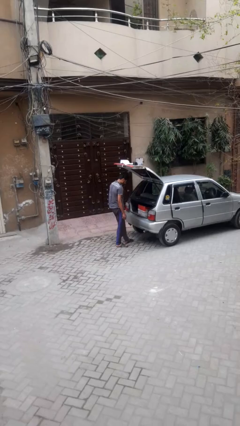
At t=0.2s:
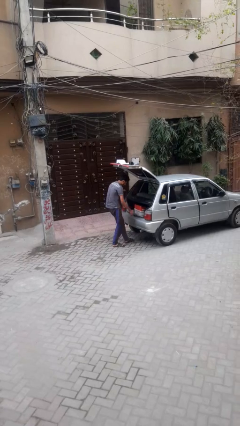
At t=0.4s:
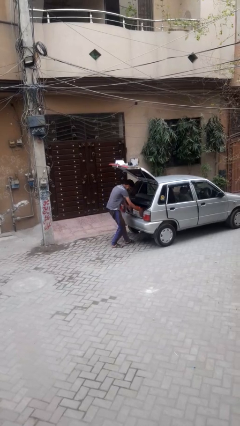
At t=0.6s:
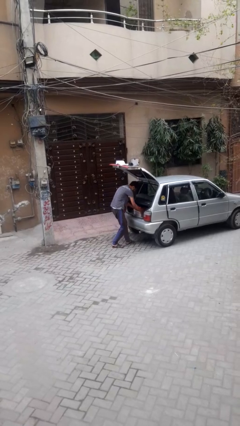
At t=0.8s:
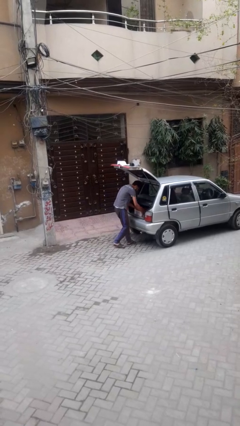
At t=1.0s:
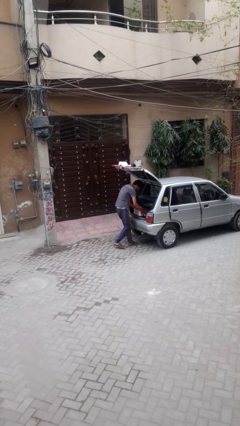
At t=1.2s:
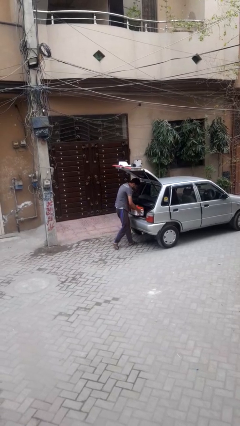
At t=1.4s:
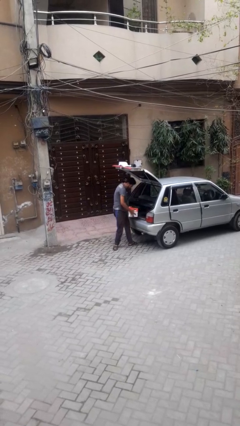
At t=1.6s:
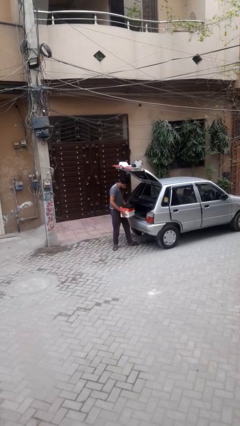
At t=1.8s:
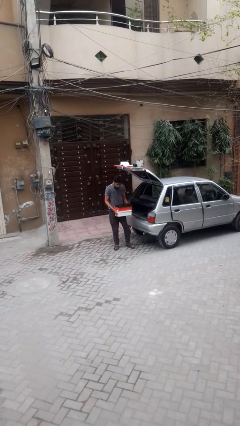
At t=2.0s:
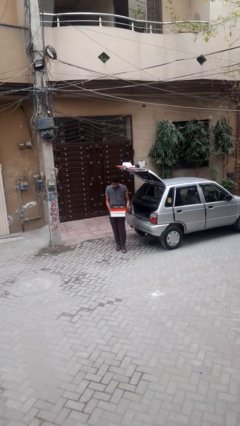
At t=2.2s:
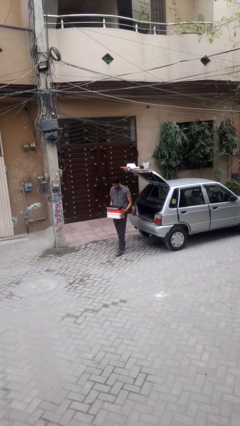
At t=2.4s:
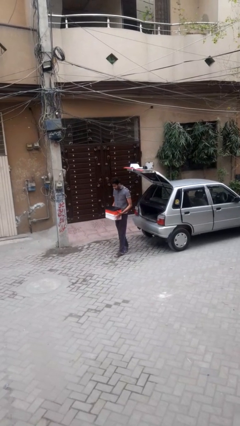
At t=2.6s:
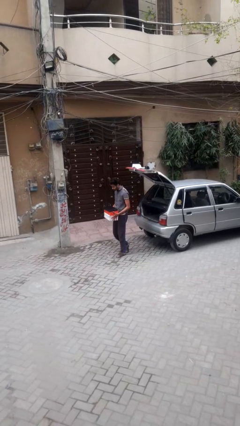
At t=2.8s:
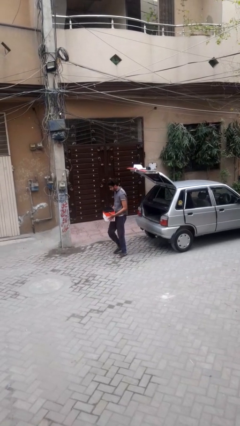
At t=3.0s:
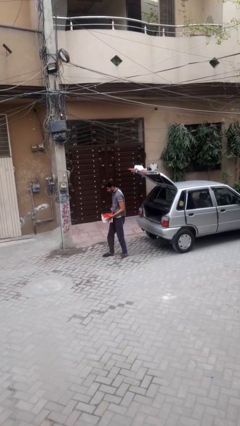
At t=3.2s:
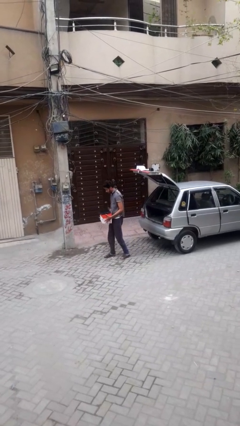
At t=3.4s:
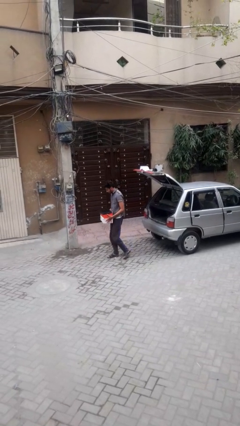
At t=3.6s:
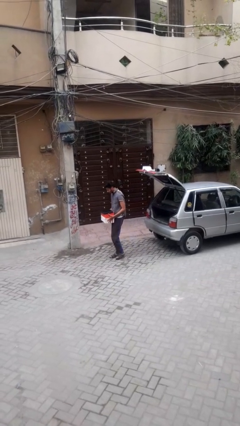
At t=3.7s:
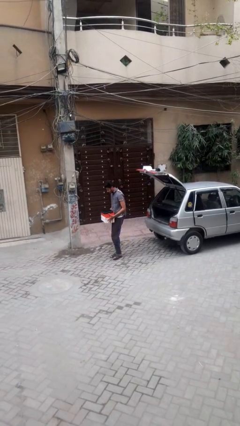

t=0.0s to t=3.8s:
person unloads car

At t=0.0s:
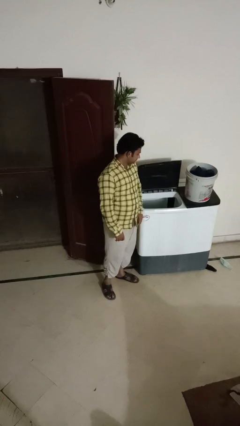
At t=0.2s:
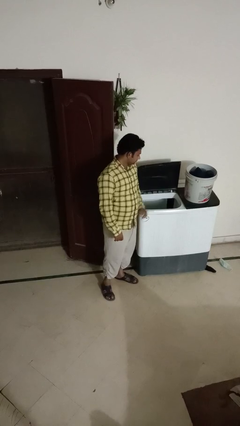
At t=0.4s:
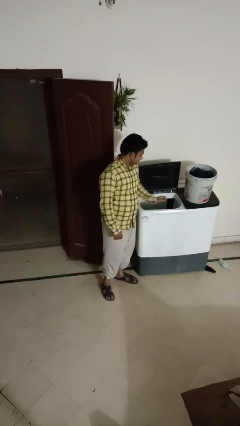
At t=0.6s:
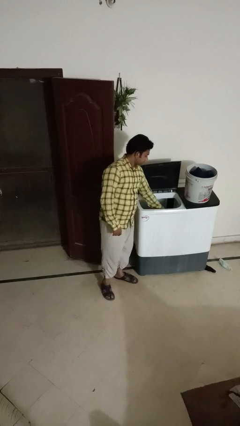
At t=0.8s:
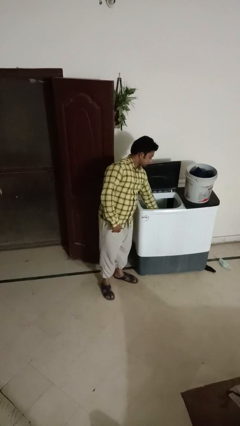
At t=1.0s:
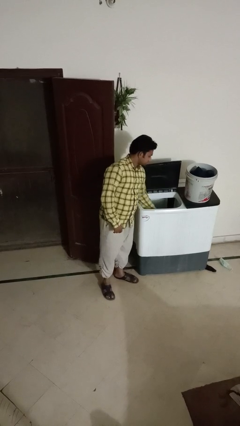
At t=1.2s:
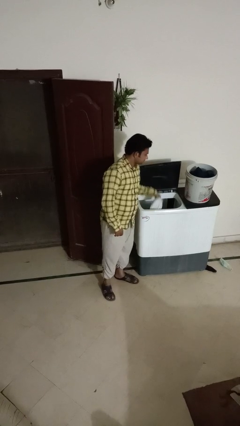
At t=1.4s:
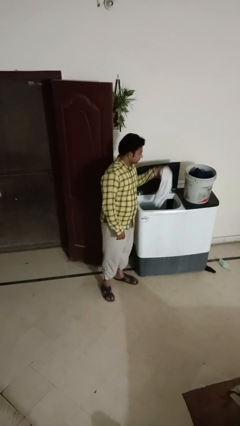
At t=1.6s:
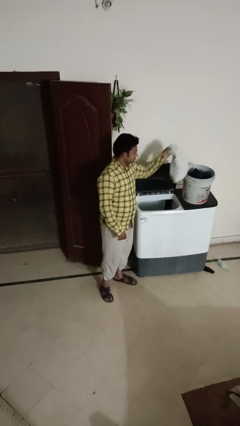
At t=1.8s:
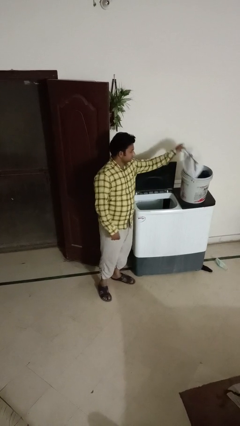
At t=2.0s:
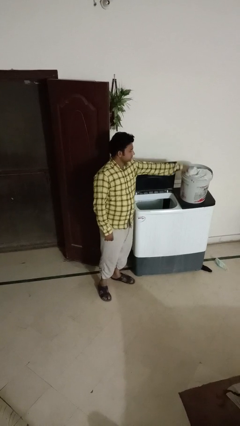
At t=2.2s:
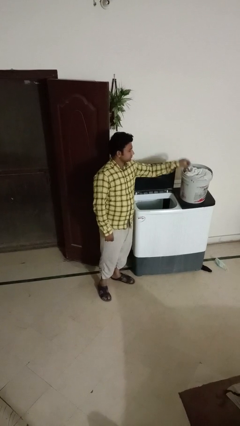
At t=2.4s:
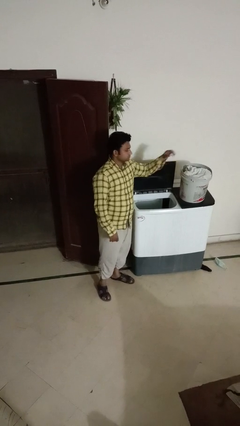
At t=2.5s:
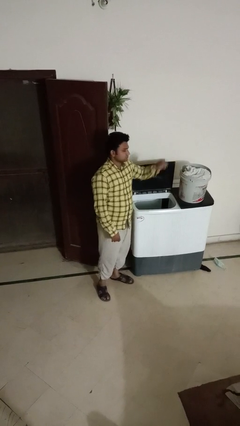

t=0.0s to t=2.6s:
person unloads clotheswasher

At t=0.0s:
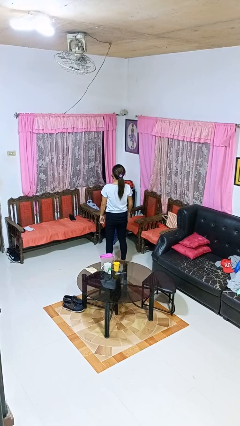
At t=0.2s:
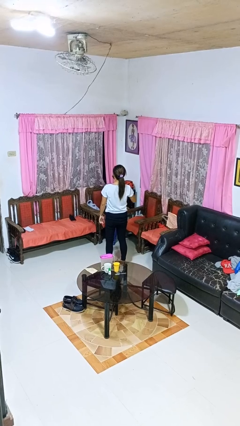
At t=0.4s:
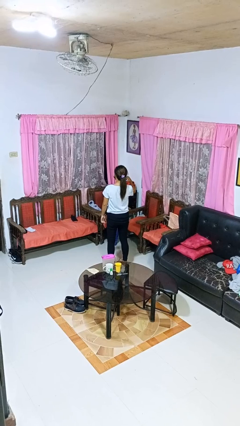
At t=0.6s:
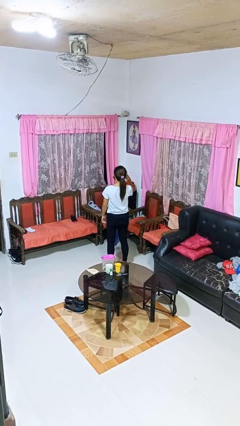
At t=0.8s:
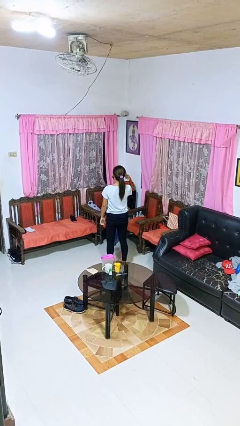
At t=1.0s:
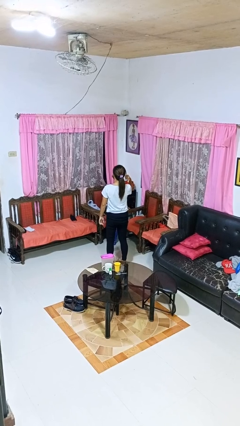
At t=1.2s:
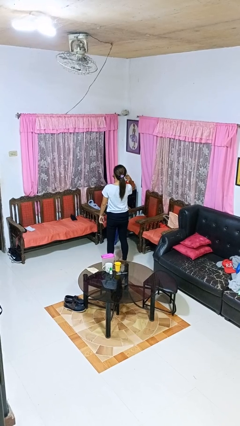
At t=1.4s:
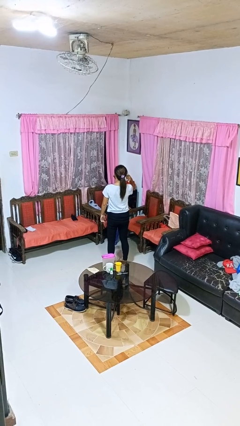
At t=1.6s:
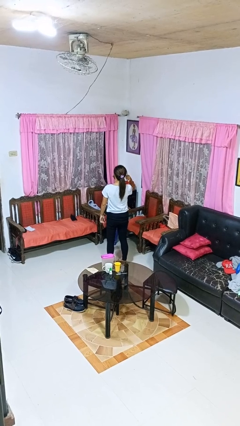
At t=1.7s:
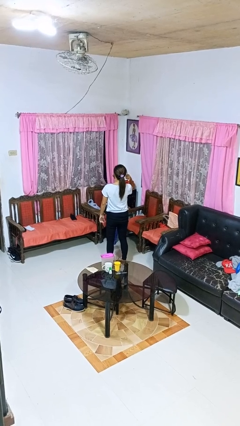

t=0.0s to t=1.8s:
person gestures behind me

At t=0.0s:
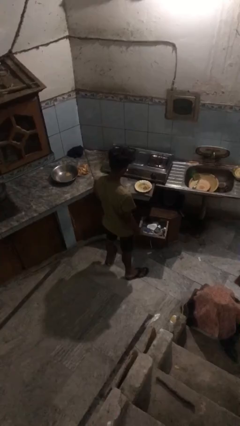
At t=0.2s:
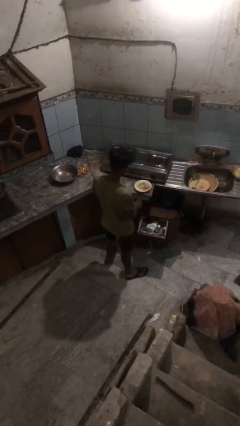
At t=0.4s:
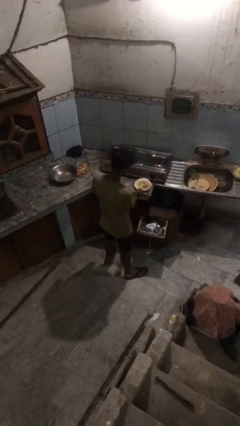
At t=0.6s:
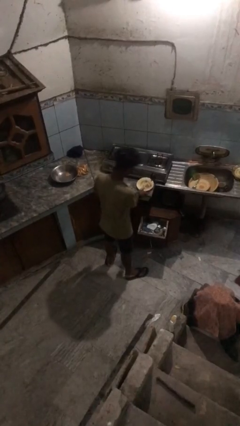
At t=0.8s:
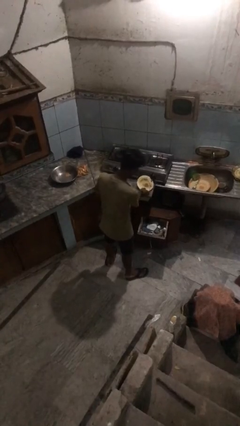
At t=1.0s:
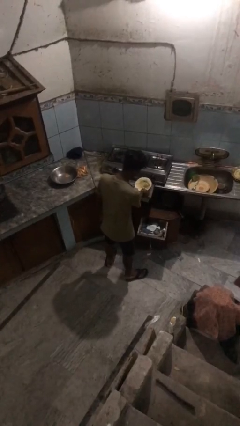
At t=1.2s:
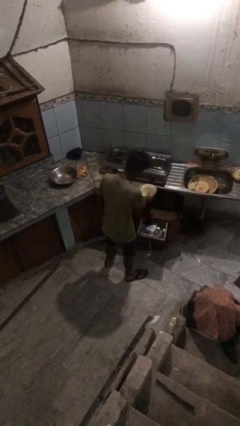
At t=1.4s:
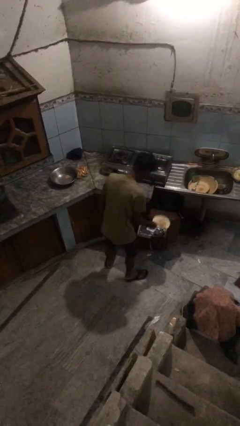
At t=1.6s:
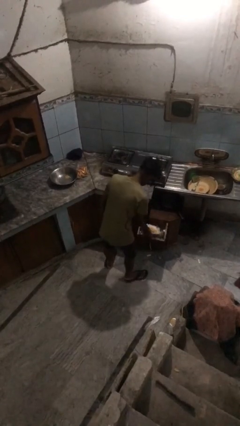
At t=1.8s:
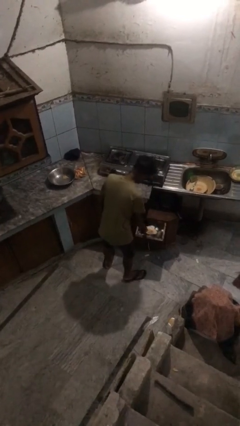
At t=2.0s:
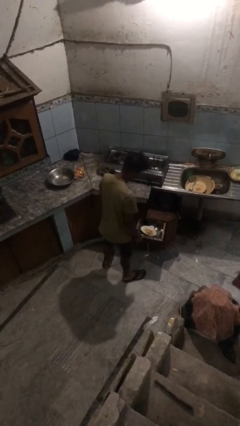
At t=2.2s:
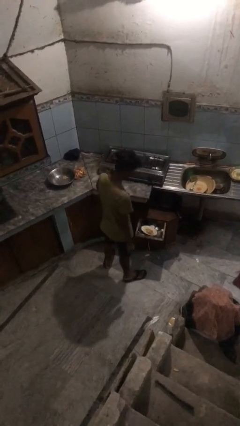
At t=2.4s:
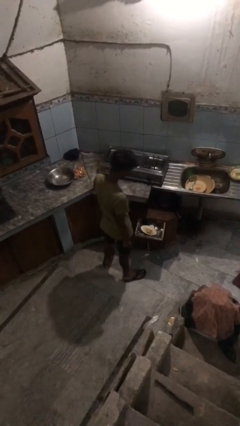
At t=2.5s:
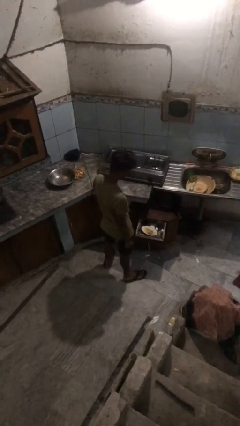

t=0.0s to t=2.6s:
person puts object into kitchen drawer

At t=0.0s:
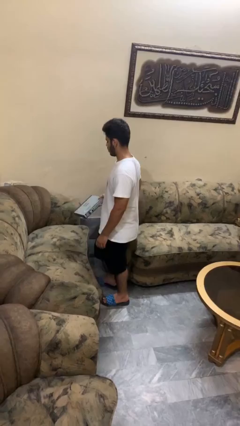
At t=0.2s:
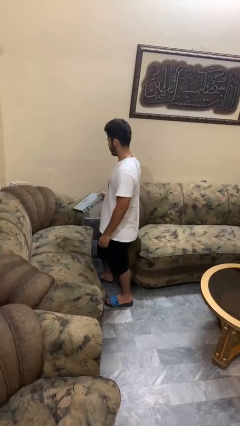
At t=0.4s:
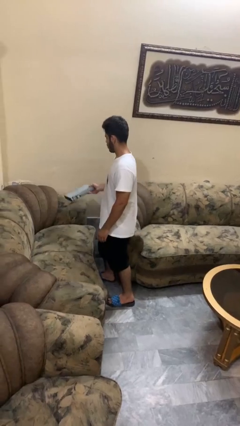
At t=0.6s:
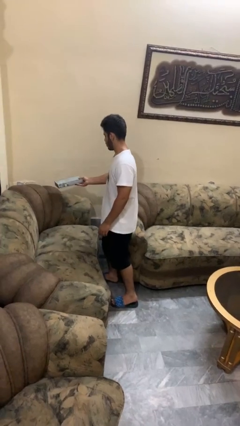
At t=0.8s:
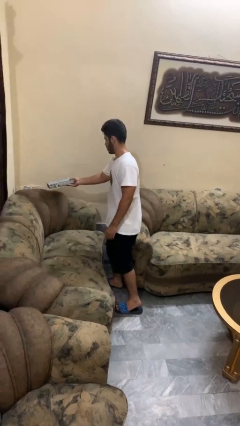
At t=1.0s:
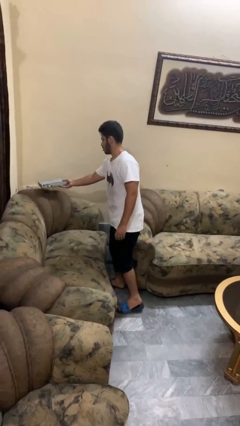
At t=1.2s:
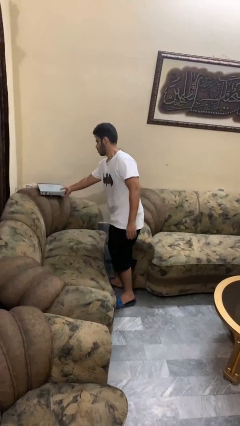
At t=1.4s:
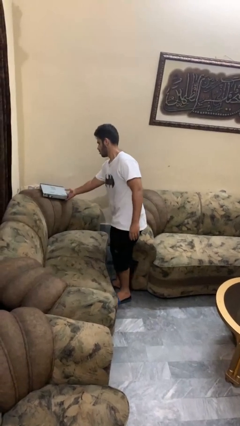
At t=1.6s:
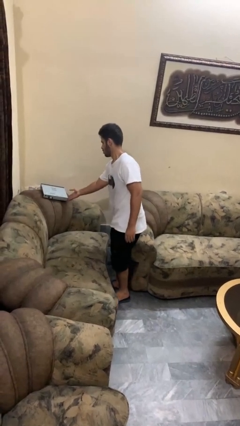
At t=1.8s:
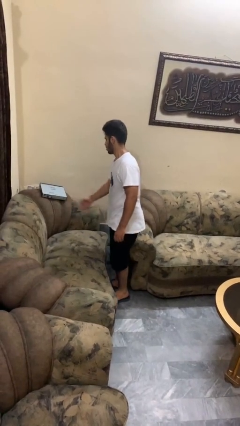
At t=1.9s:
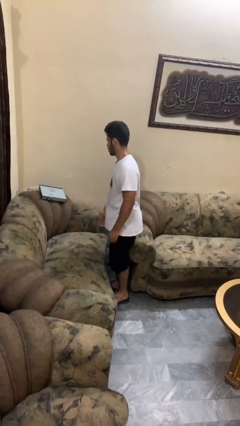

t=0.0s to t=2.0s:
person puts down object on couch

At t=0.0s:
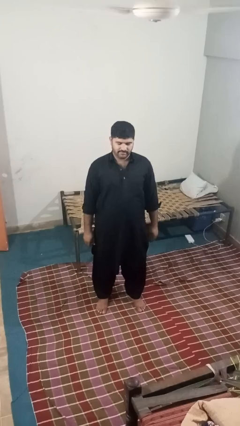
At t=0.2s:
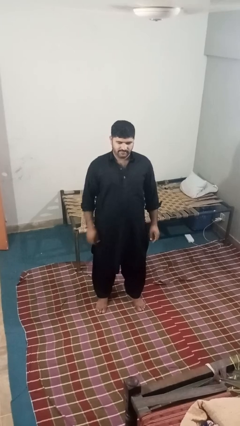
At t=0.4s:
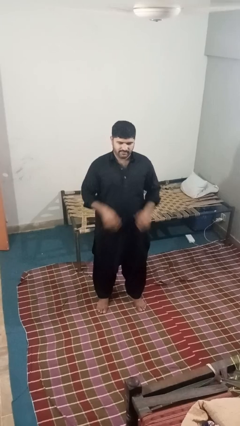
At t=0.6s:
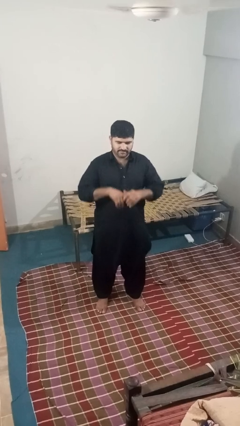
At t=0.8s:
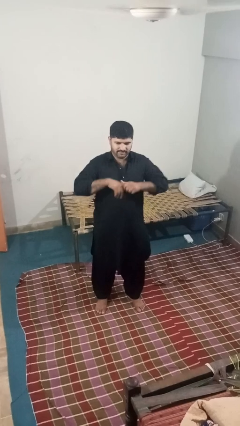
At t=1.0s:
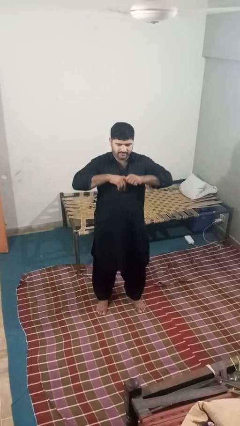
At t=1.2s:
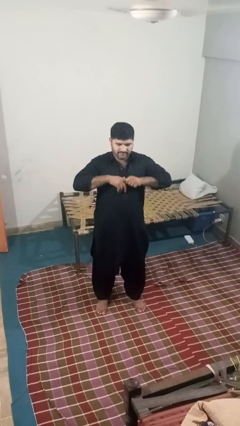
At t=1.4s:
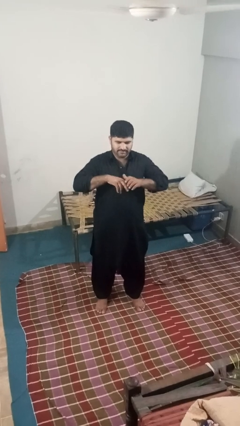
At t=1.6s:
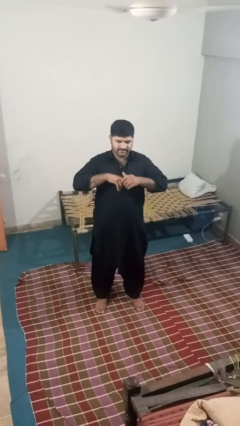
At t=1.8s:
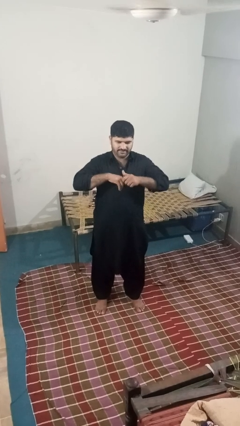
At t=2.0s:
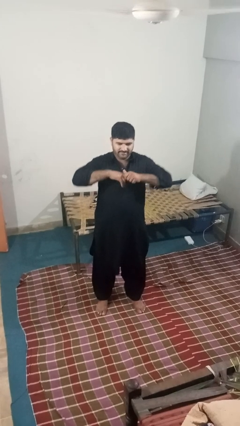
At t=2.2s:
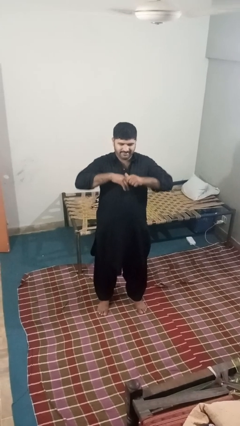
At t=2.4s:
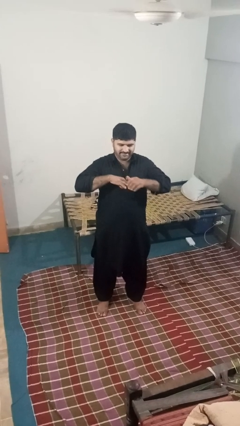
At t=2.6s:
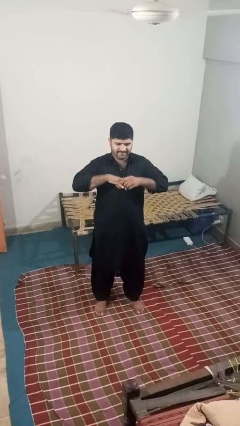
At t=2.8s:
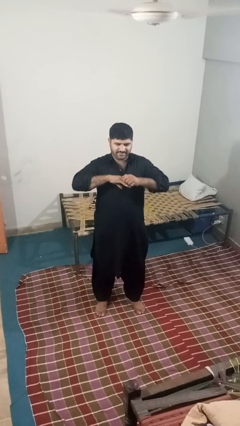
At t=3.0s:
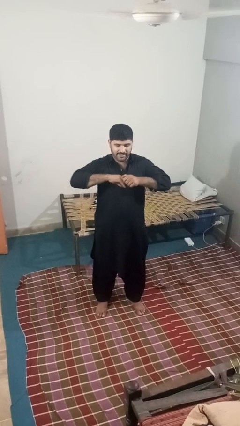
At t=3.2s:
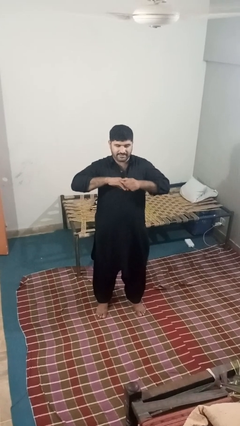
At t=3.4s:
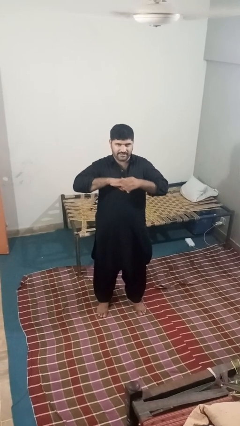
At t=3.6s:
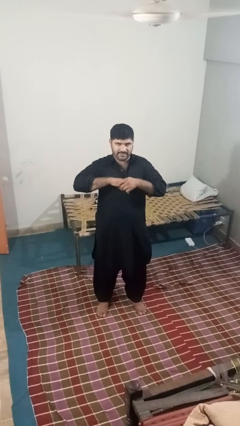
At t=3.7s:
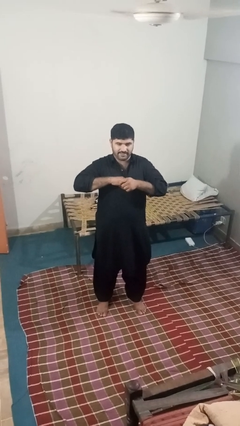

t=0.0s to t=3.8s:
person cracks knuckles

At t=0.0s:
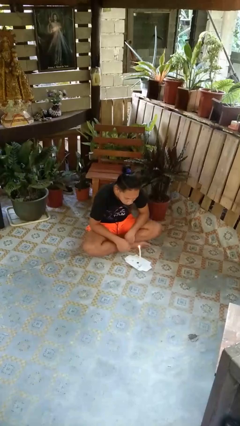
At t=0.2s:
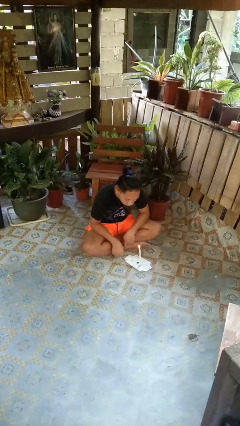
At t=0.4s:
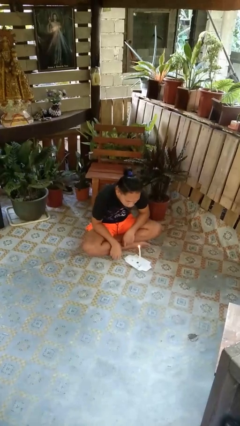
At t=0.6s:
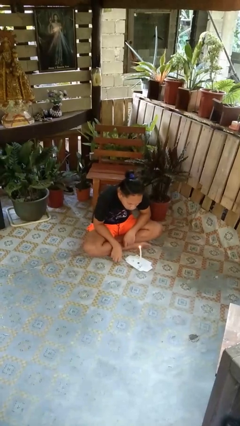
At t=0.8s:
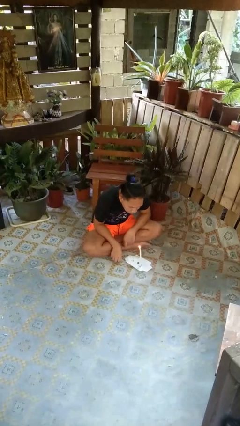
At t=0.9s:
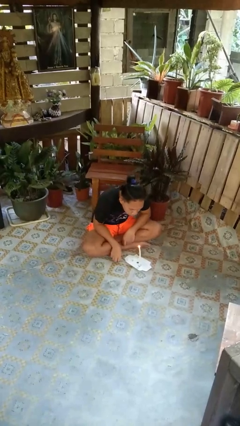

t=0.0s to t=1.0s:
person extinguishes candle
